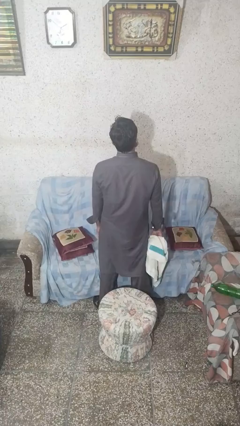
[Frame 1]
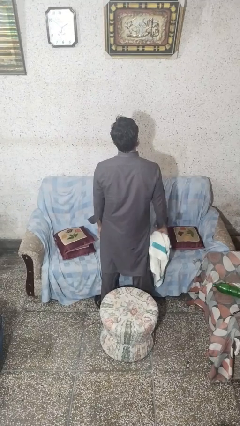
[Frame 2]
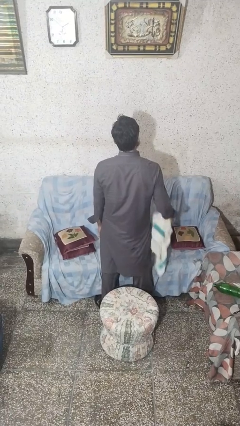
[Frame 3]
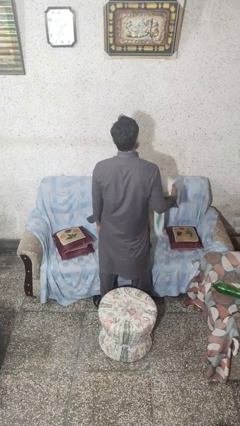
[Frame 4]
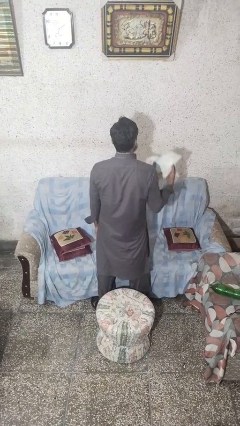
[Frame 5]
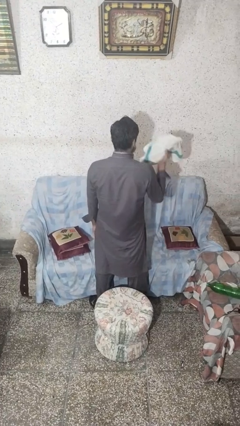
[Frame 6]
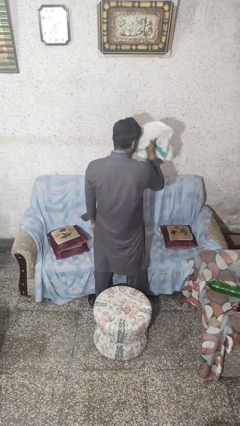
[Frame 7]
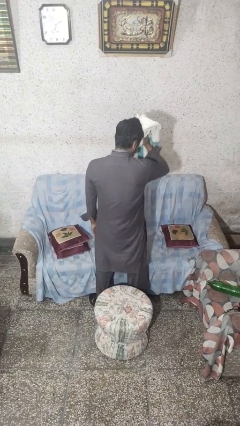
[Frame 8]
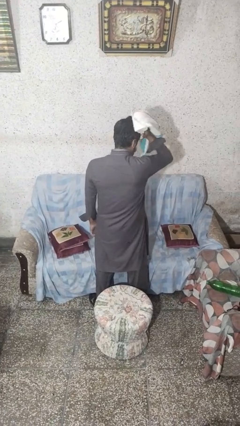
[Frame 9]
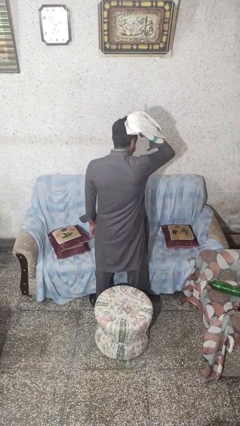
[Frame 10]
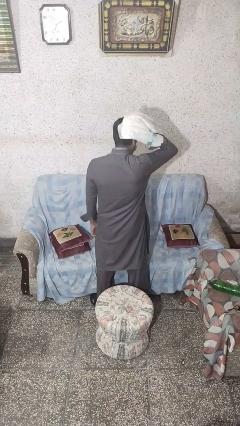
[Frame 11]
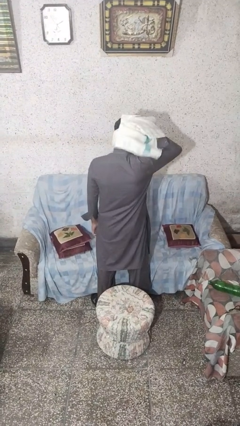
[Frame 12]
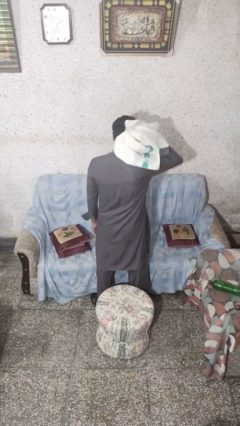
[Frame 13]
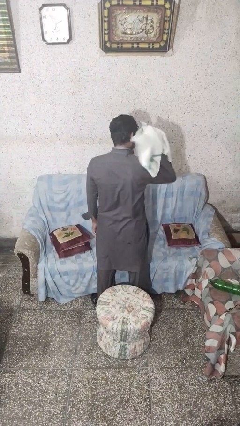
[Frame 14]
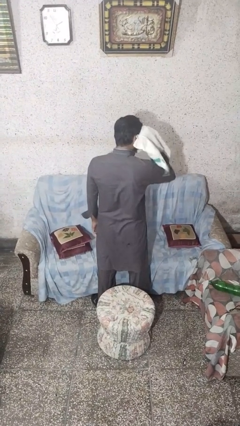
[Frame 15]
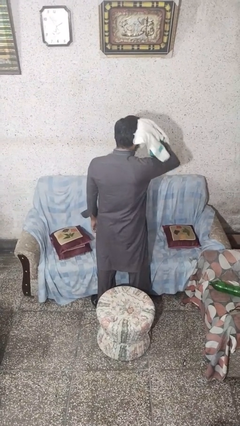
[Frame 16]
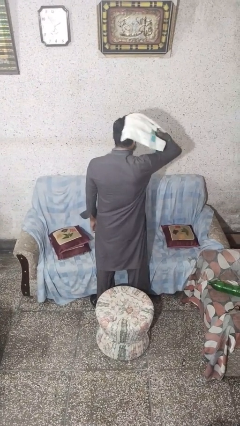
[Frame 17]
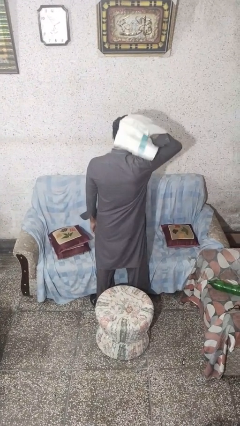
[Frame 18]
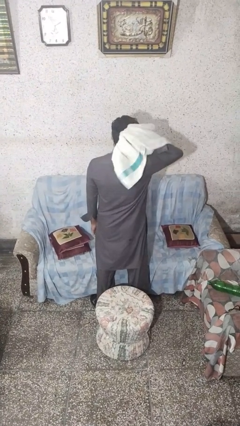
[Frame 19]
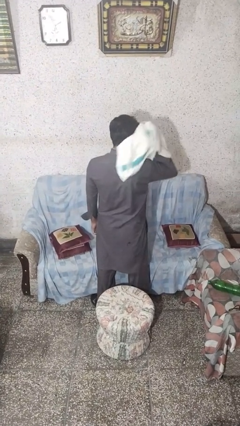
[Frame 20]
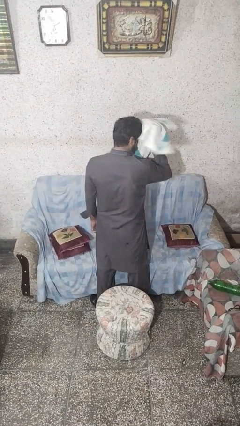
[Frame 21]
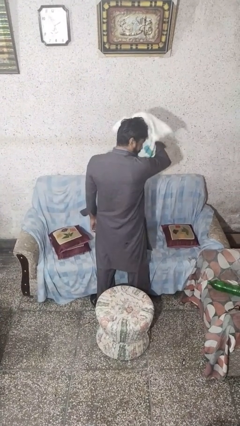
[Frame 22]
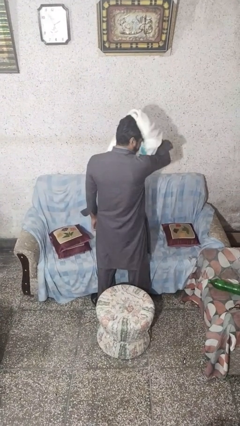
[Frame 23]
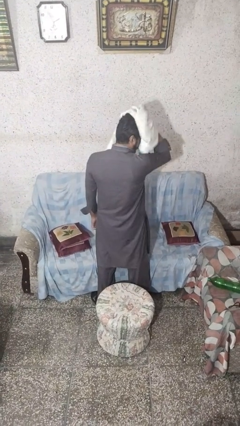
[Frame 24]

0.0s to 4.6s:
person dries hair with towel

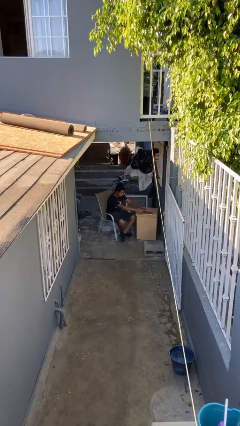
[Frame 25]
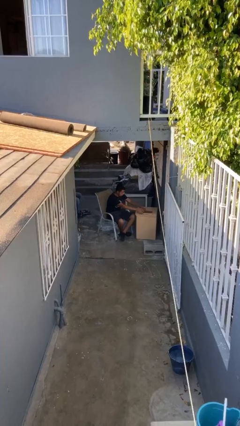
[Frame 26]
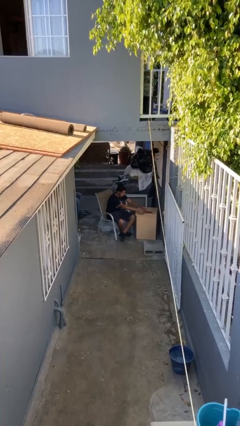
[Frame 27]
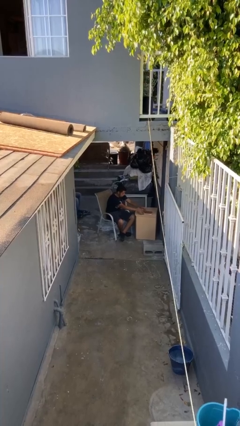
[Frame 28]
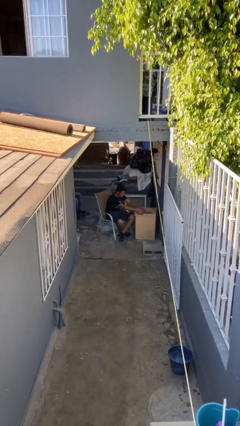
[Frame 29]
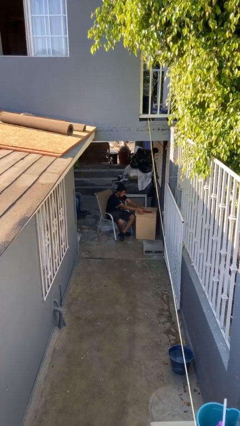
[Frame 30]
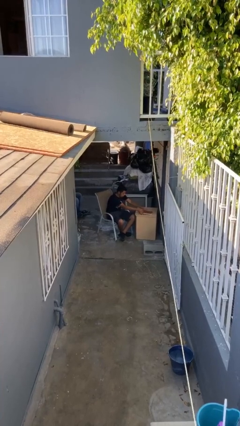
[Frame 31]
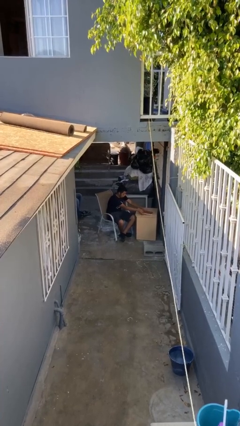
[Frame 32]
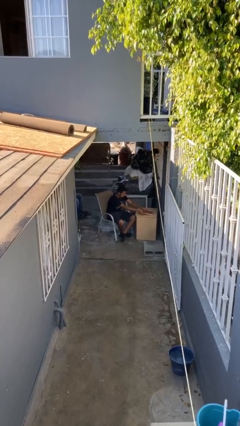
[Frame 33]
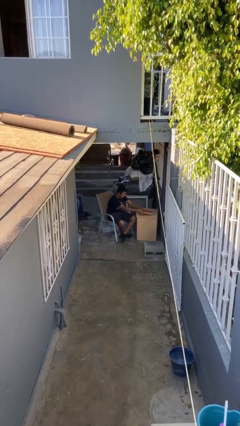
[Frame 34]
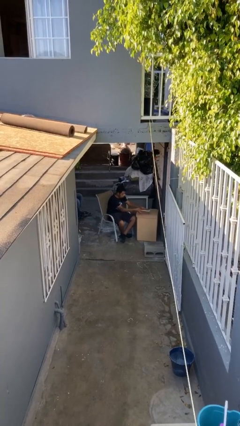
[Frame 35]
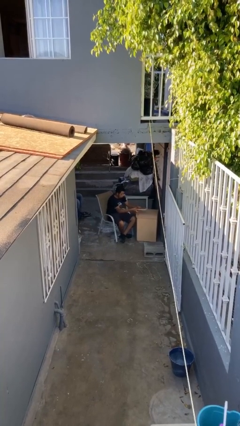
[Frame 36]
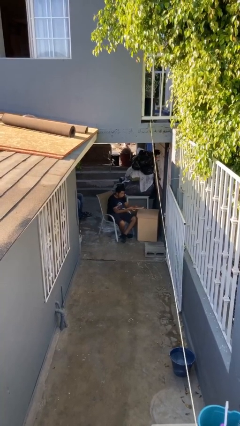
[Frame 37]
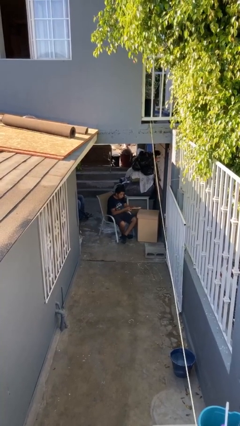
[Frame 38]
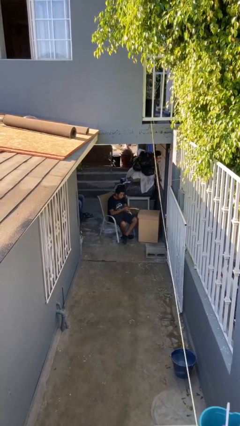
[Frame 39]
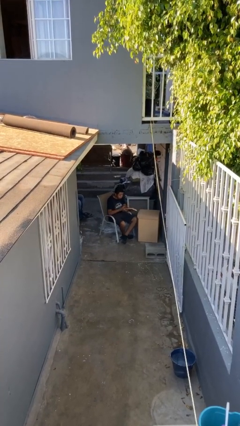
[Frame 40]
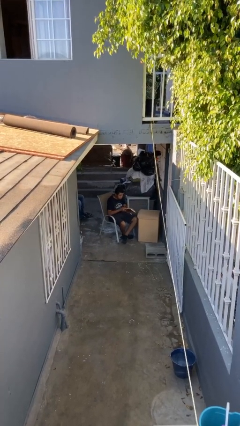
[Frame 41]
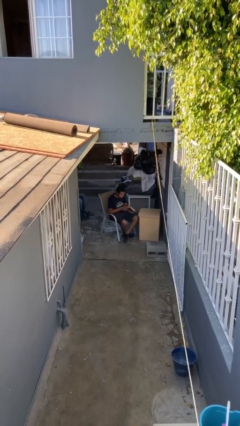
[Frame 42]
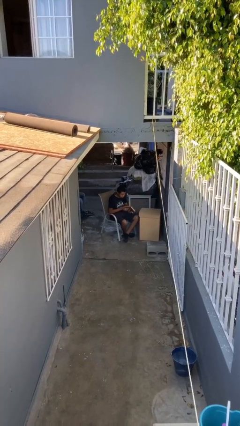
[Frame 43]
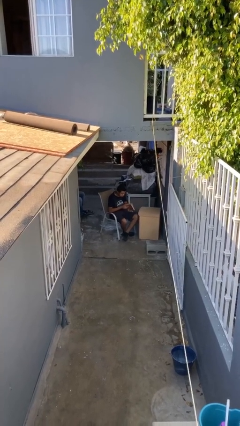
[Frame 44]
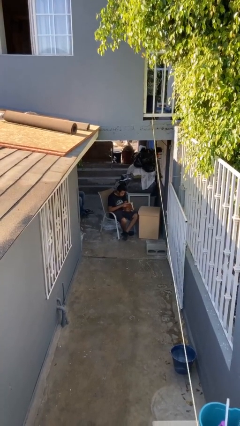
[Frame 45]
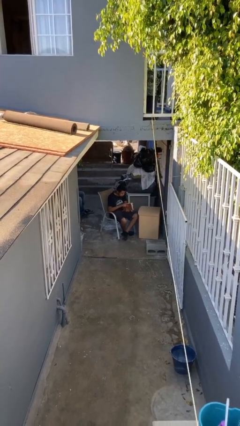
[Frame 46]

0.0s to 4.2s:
person picks up object from table

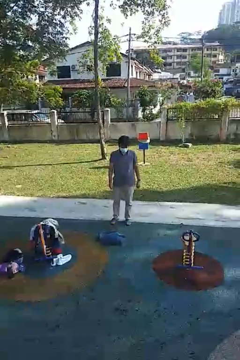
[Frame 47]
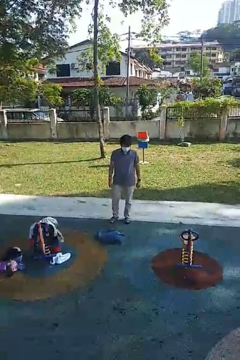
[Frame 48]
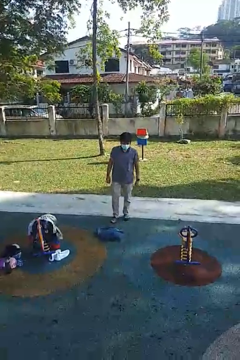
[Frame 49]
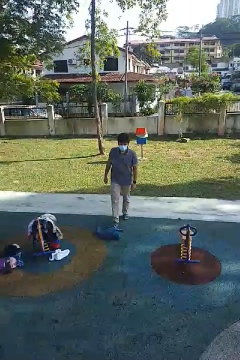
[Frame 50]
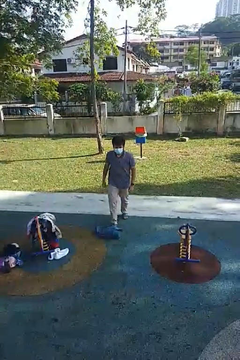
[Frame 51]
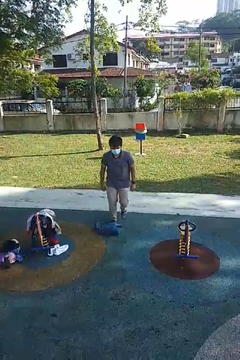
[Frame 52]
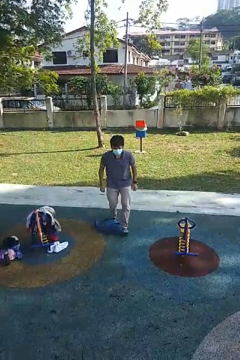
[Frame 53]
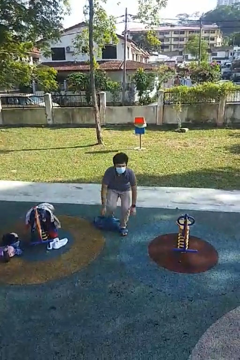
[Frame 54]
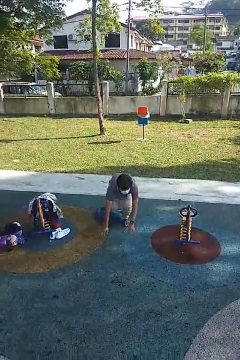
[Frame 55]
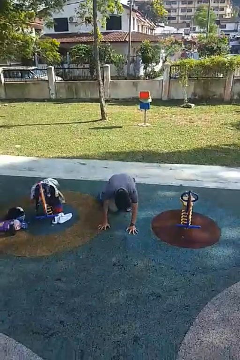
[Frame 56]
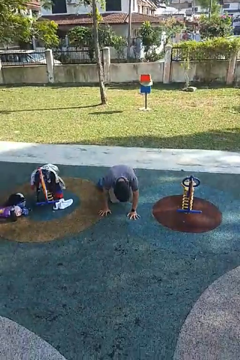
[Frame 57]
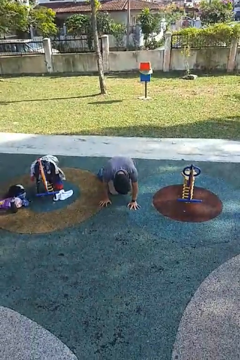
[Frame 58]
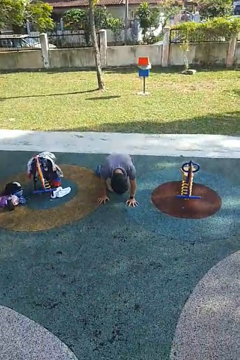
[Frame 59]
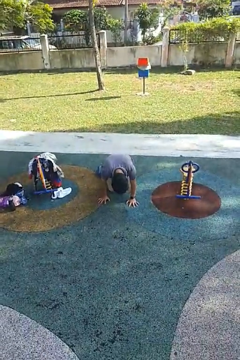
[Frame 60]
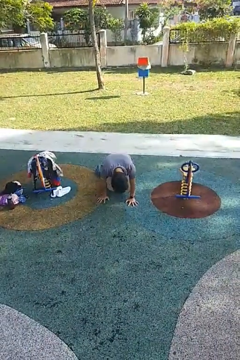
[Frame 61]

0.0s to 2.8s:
person trips on object on floor

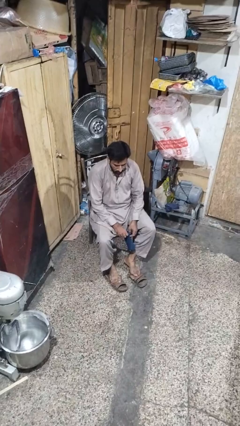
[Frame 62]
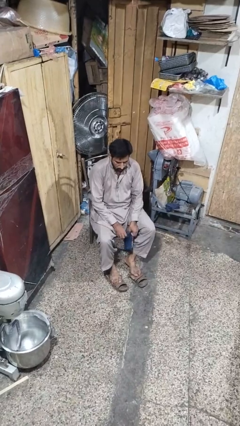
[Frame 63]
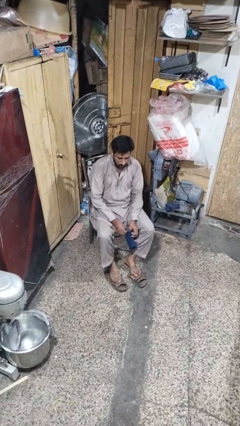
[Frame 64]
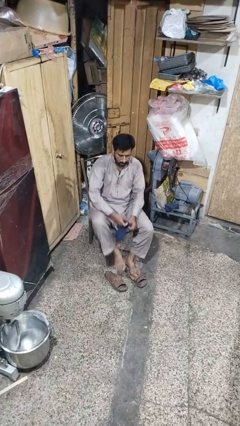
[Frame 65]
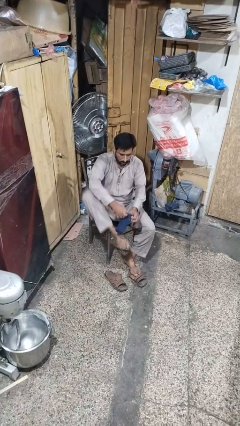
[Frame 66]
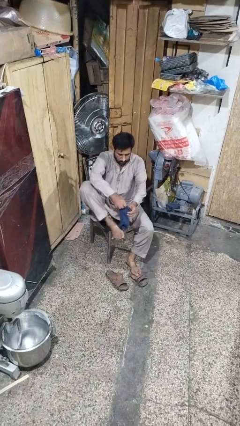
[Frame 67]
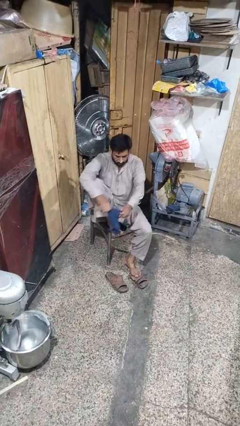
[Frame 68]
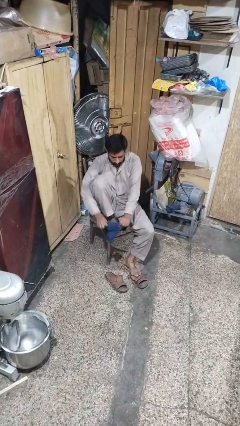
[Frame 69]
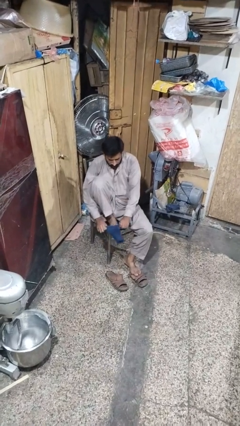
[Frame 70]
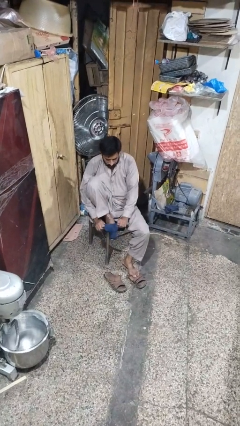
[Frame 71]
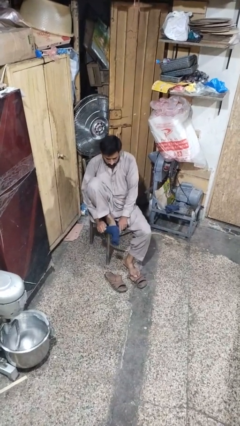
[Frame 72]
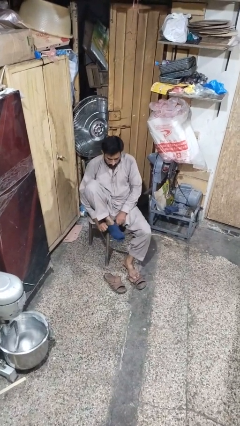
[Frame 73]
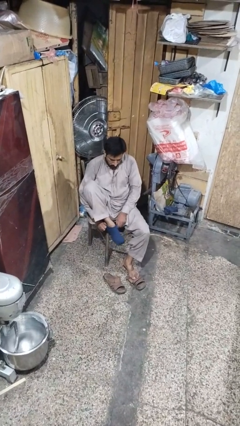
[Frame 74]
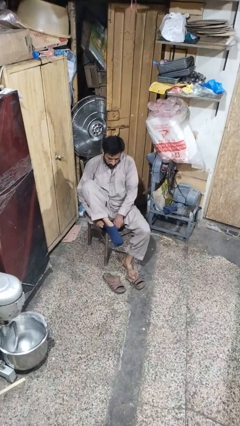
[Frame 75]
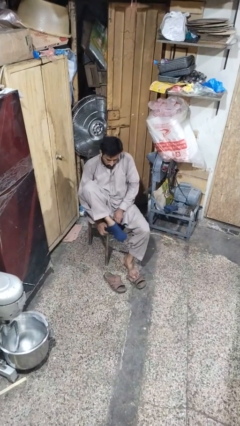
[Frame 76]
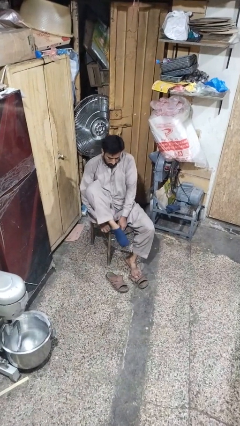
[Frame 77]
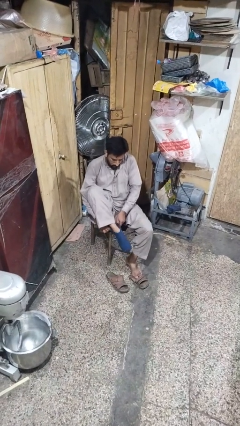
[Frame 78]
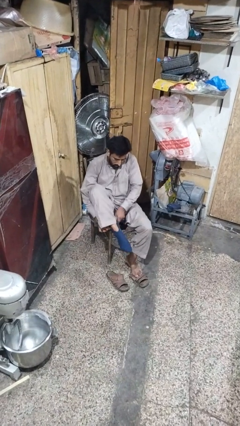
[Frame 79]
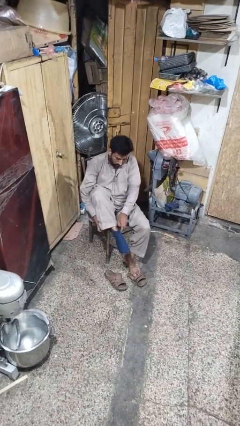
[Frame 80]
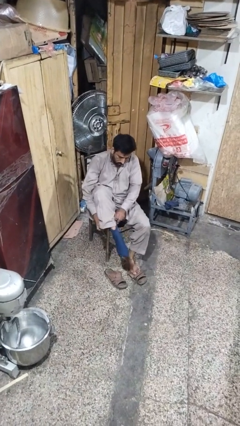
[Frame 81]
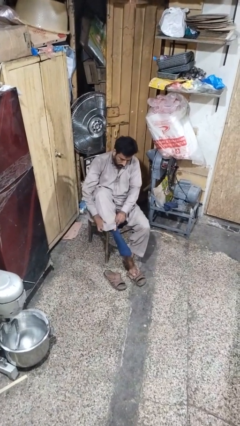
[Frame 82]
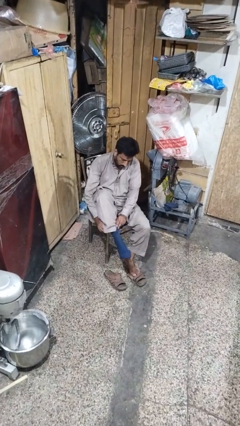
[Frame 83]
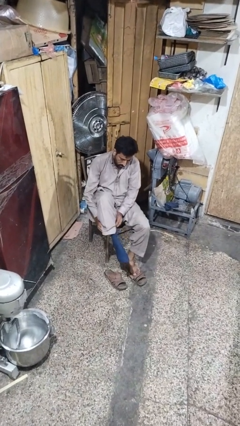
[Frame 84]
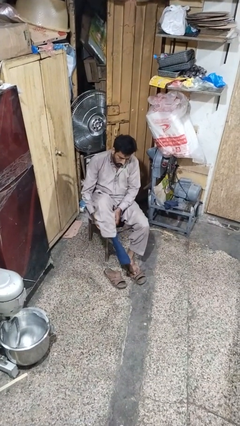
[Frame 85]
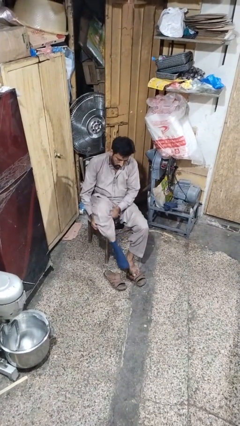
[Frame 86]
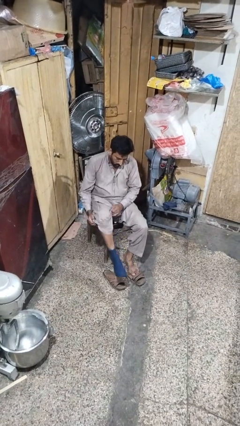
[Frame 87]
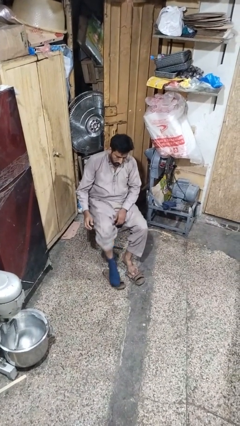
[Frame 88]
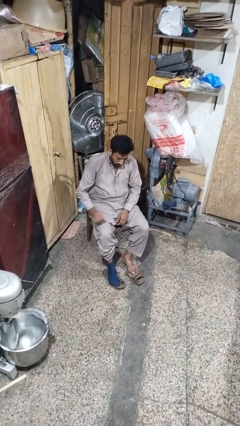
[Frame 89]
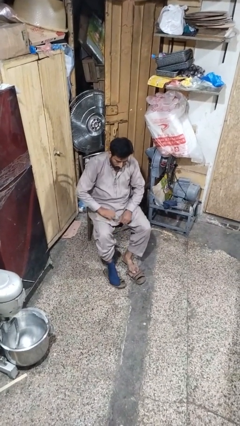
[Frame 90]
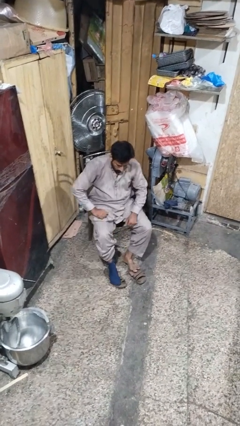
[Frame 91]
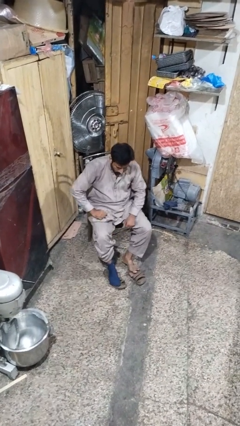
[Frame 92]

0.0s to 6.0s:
person puts on socks

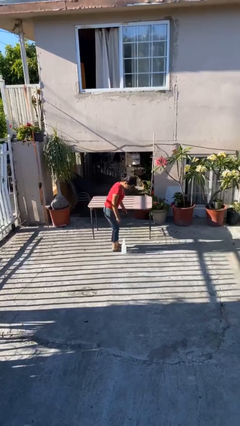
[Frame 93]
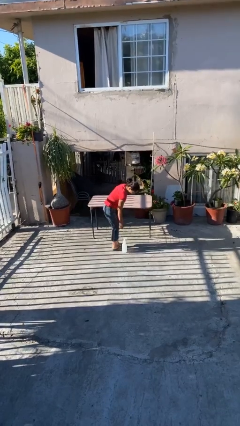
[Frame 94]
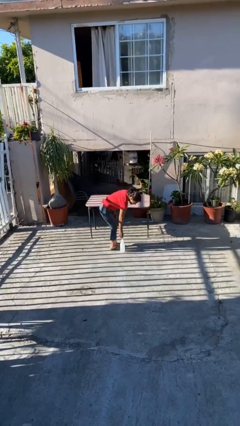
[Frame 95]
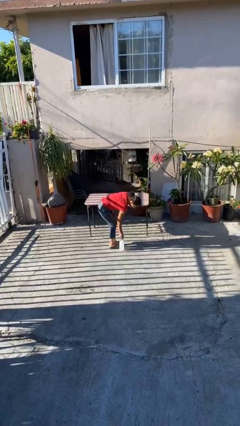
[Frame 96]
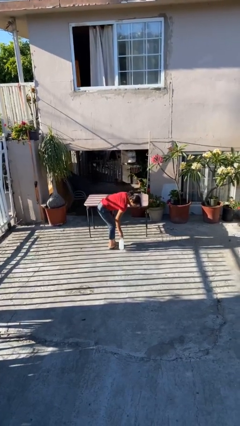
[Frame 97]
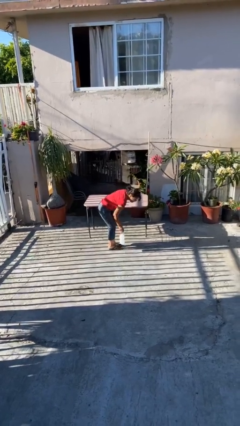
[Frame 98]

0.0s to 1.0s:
person picks up object from floor
